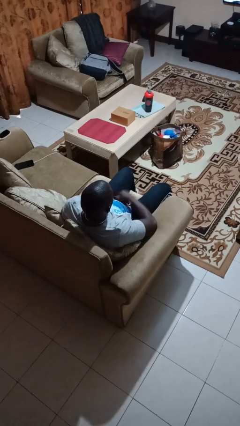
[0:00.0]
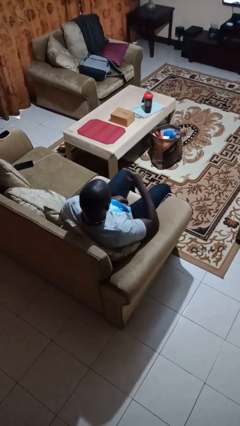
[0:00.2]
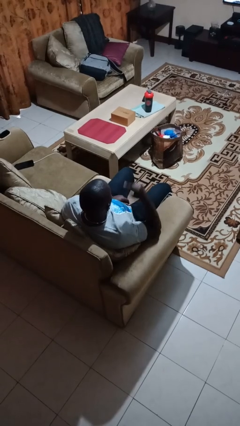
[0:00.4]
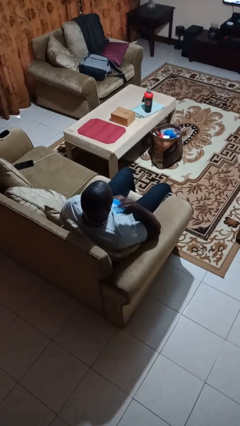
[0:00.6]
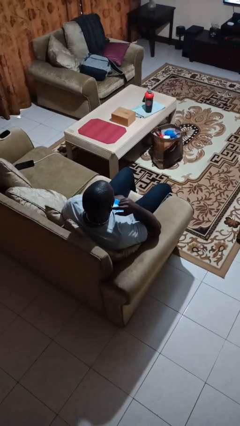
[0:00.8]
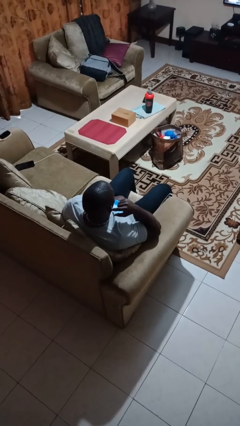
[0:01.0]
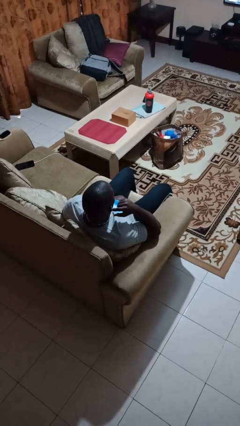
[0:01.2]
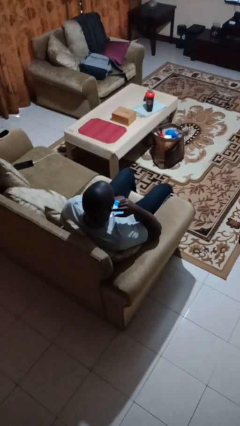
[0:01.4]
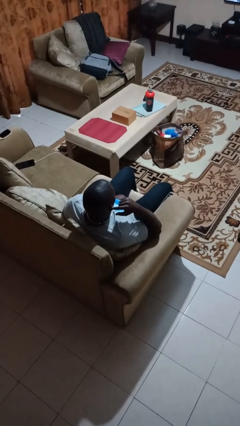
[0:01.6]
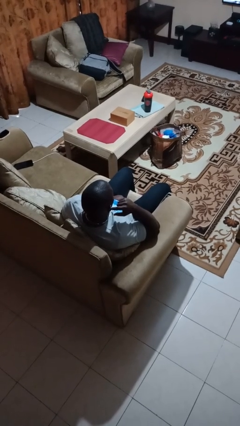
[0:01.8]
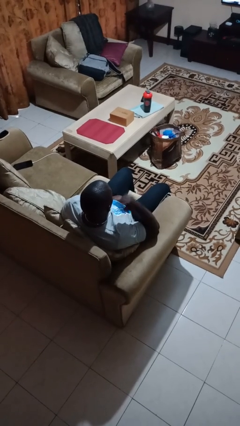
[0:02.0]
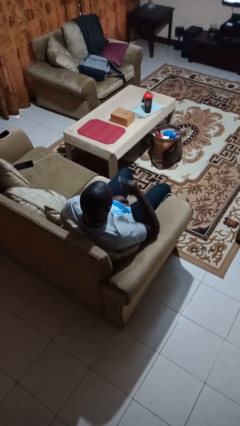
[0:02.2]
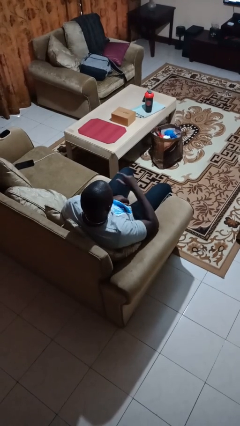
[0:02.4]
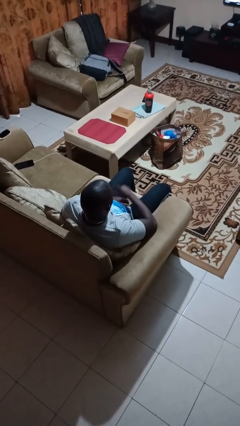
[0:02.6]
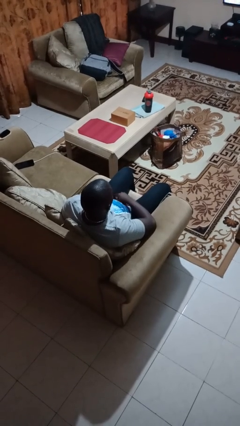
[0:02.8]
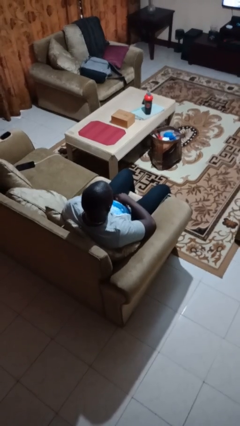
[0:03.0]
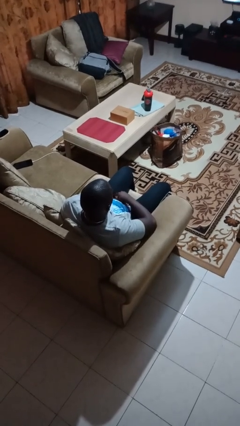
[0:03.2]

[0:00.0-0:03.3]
person gestures listen closely

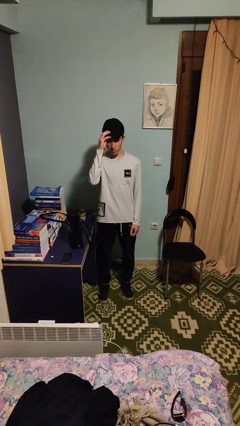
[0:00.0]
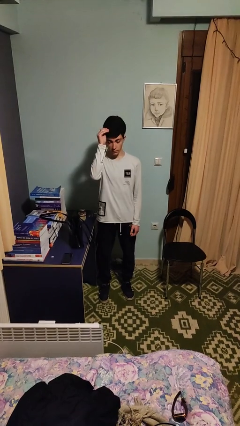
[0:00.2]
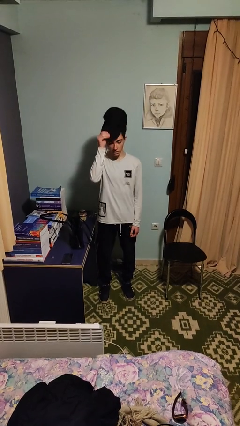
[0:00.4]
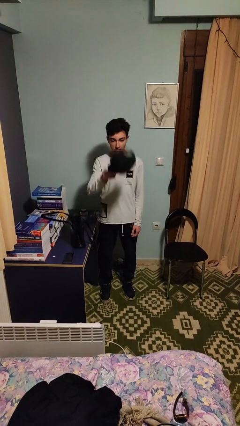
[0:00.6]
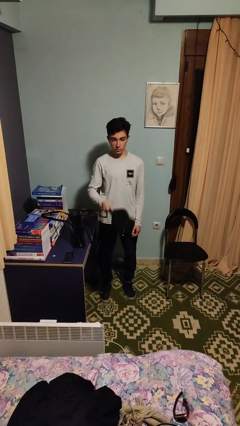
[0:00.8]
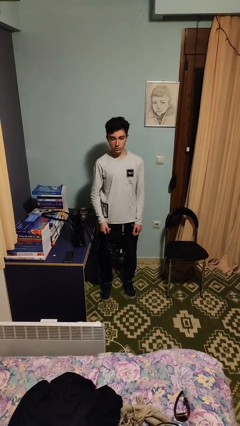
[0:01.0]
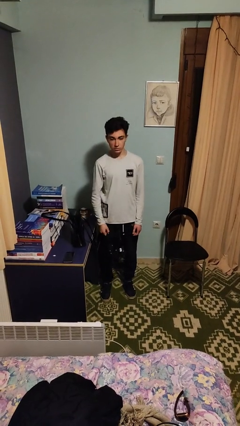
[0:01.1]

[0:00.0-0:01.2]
person takes off hat

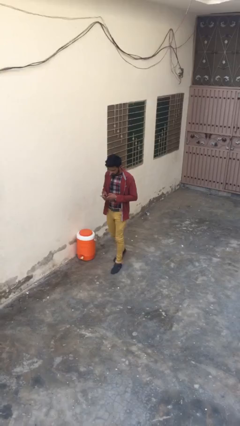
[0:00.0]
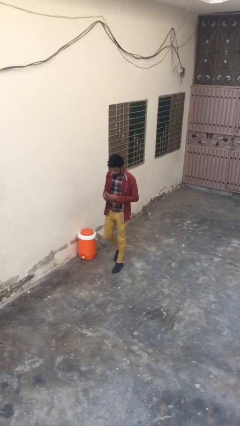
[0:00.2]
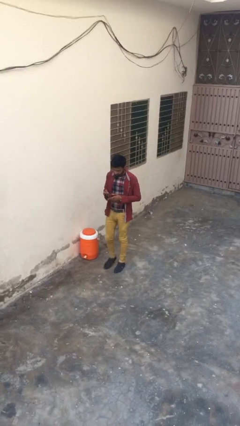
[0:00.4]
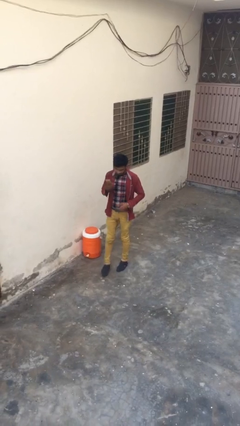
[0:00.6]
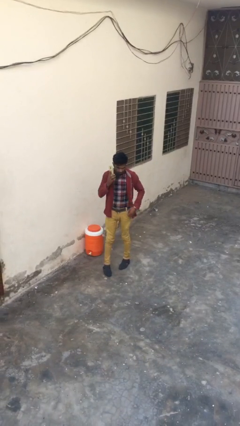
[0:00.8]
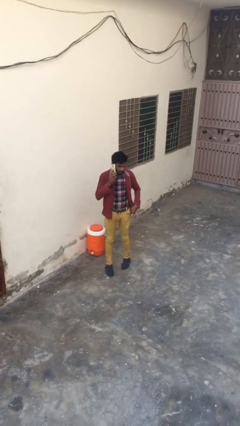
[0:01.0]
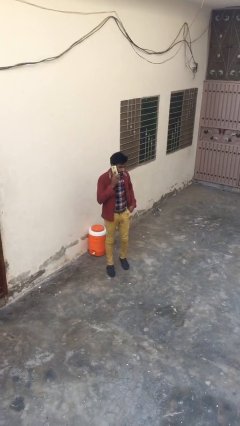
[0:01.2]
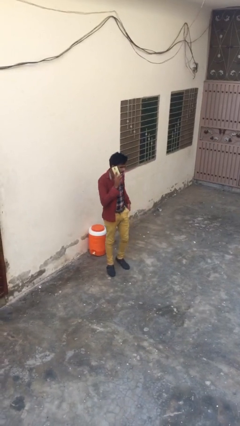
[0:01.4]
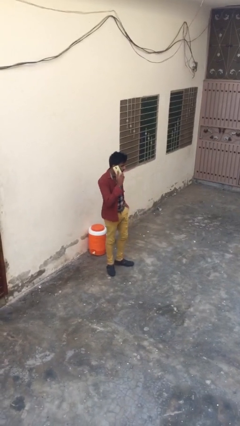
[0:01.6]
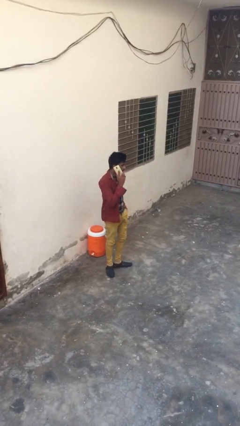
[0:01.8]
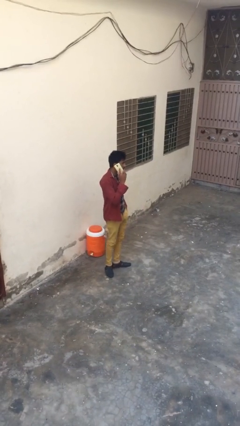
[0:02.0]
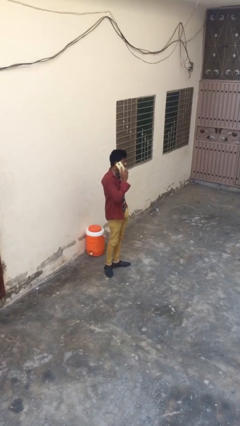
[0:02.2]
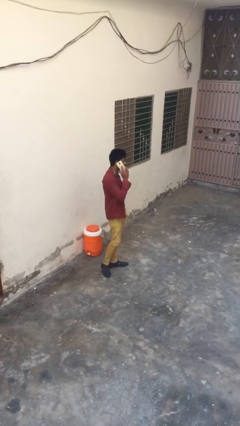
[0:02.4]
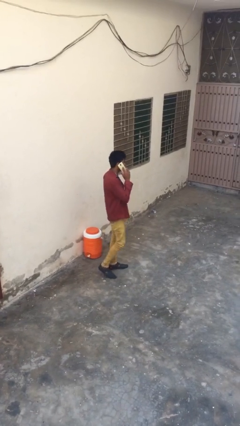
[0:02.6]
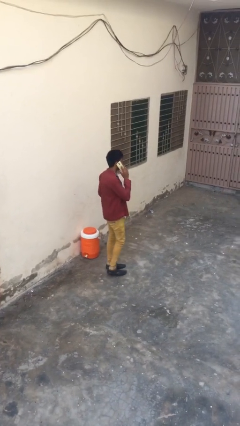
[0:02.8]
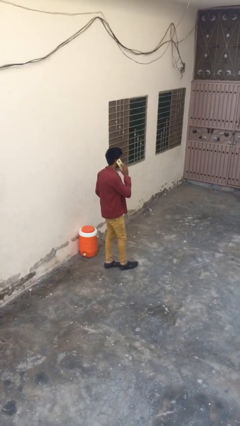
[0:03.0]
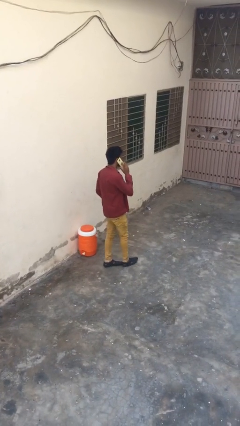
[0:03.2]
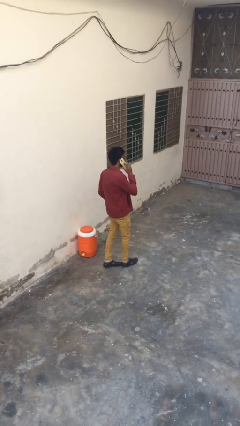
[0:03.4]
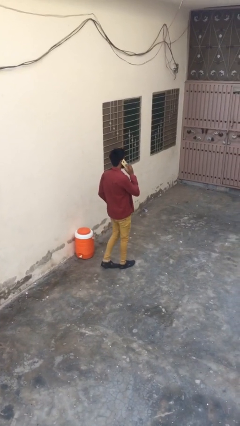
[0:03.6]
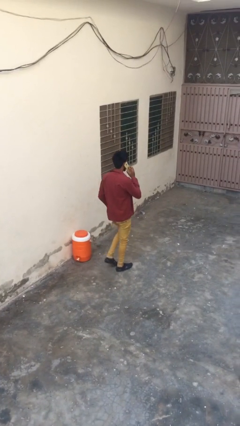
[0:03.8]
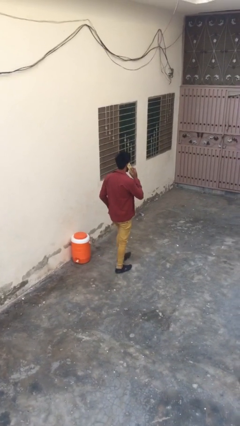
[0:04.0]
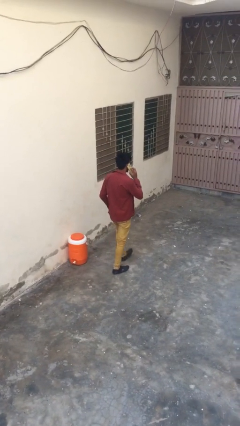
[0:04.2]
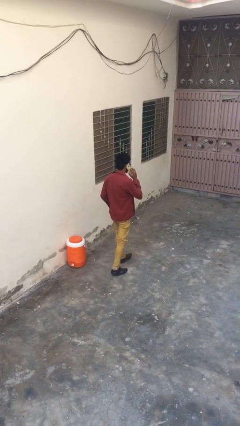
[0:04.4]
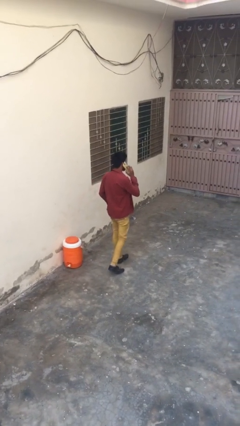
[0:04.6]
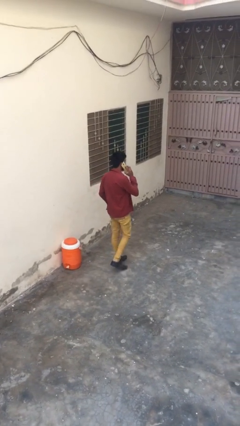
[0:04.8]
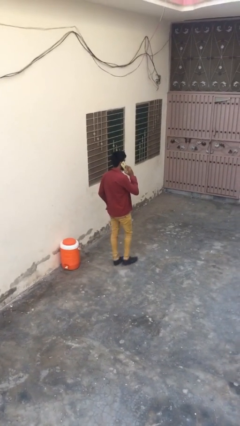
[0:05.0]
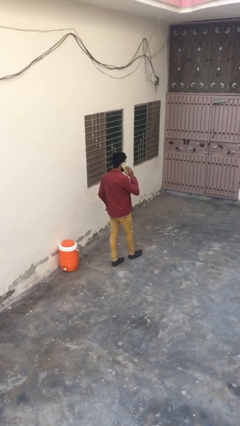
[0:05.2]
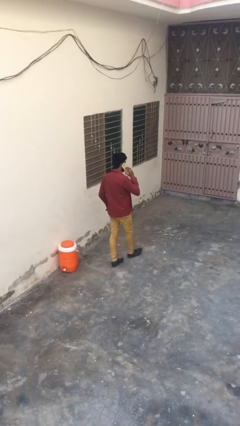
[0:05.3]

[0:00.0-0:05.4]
person talks on phone

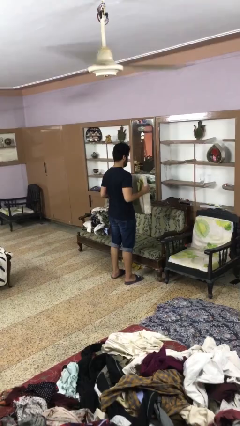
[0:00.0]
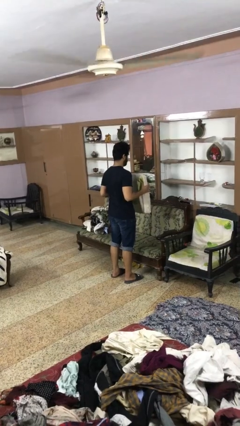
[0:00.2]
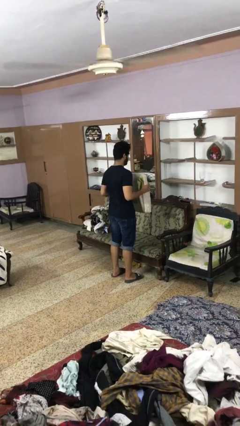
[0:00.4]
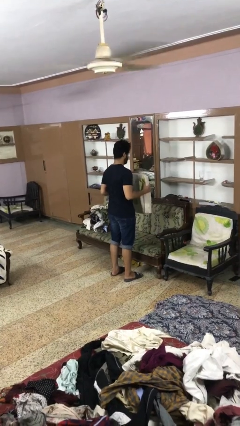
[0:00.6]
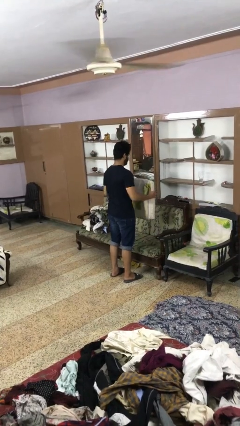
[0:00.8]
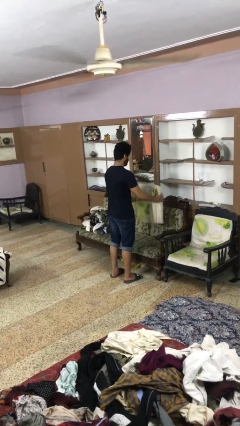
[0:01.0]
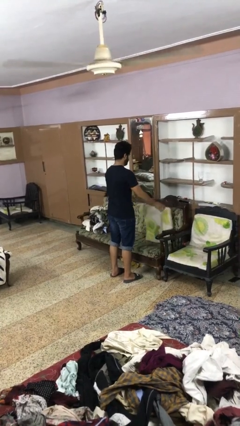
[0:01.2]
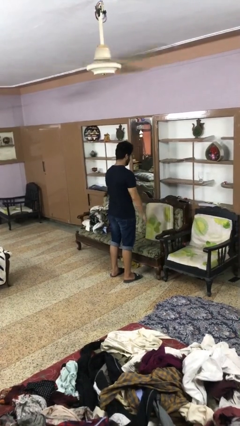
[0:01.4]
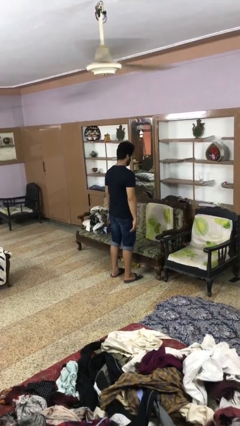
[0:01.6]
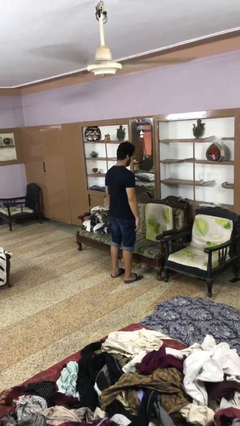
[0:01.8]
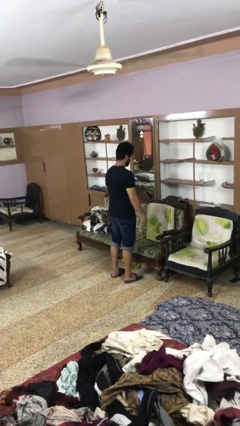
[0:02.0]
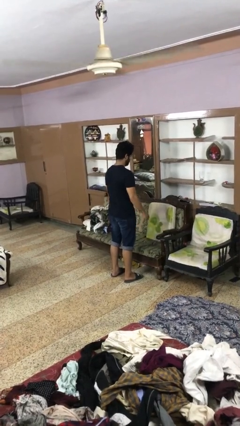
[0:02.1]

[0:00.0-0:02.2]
person puts down object on couch

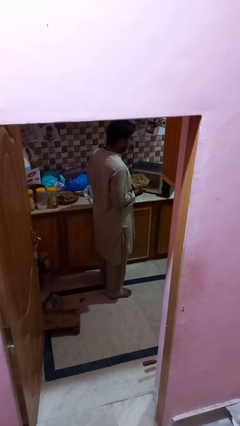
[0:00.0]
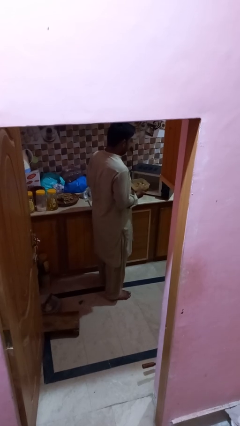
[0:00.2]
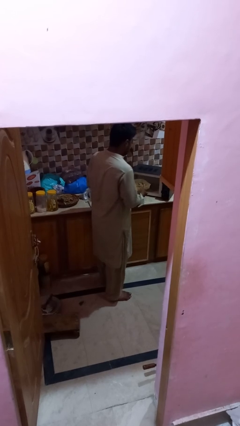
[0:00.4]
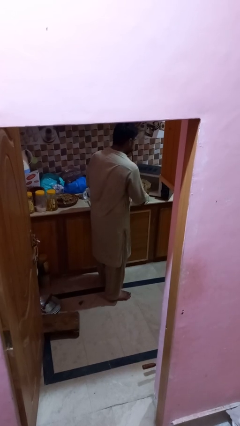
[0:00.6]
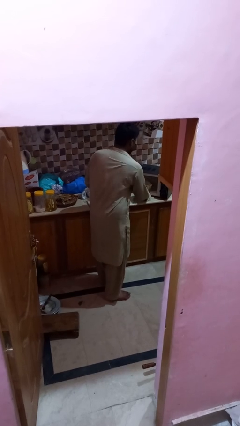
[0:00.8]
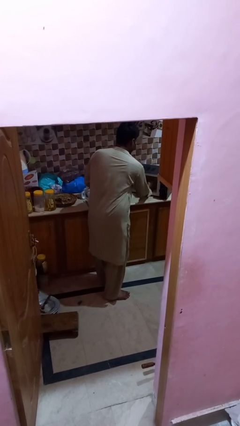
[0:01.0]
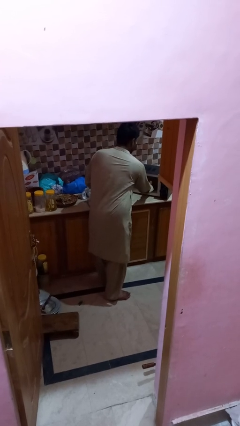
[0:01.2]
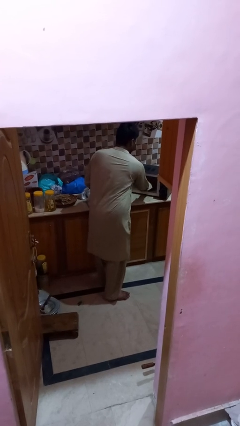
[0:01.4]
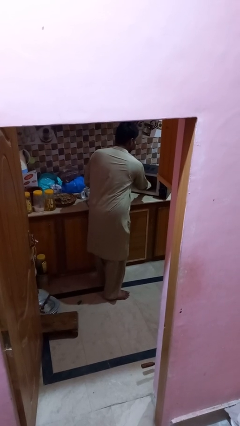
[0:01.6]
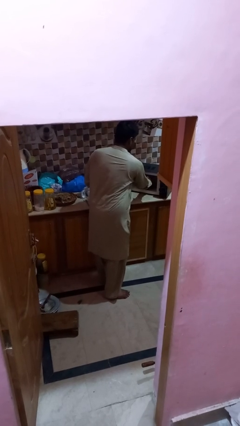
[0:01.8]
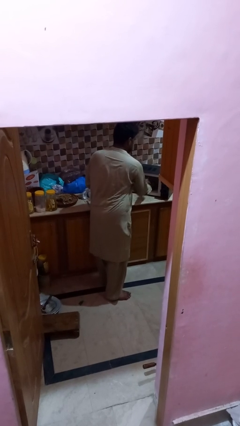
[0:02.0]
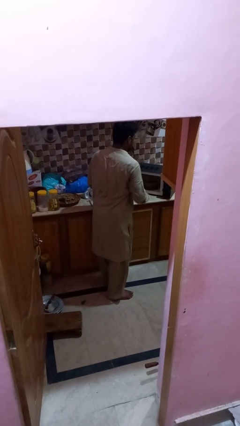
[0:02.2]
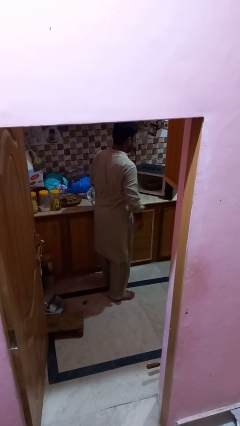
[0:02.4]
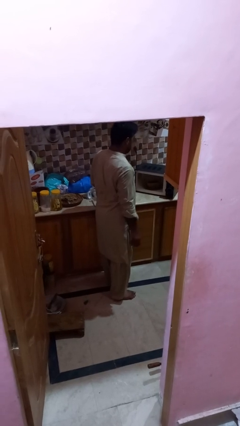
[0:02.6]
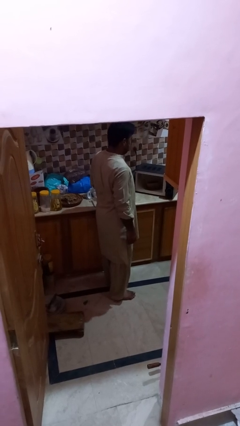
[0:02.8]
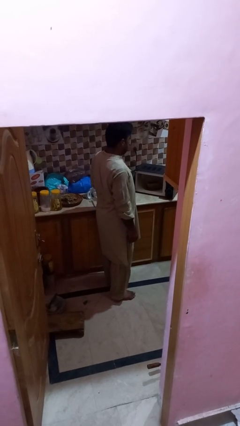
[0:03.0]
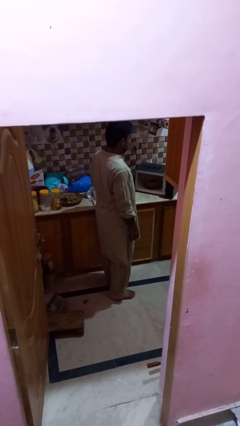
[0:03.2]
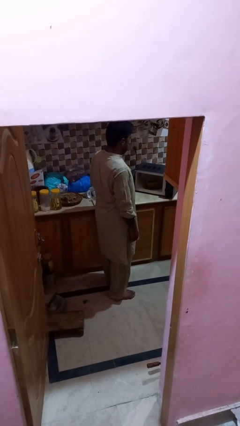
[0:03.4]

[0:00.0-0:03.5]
person puts object into microwave

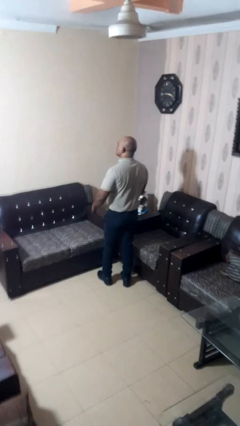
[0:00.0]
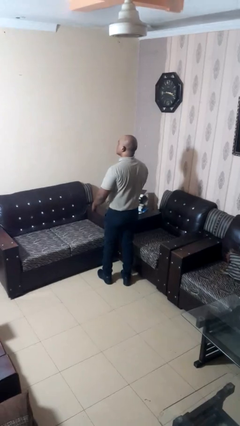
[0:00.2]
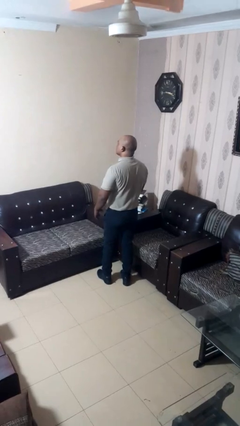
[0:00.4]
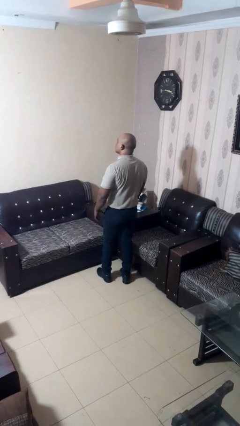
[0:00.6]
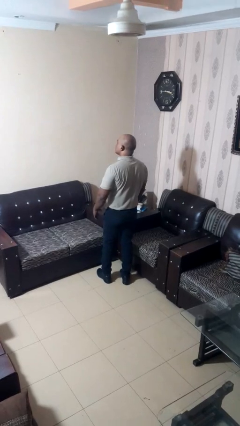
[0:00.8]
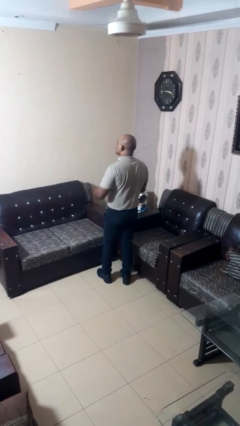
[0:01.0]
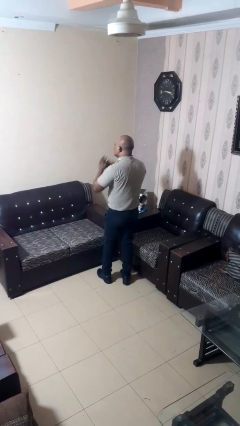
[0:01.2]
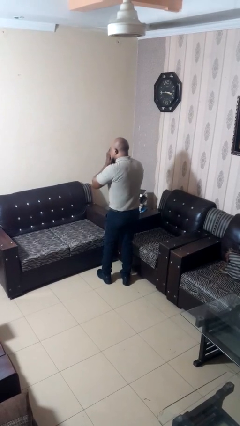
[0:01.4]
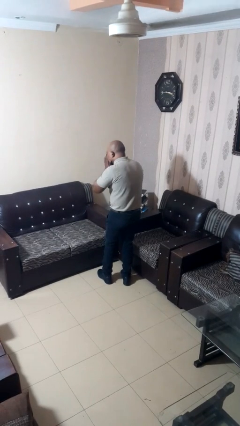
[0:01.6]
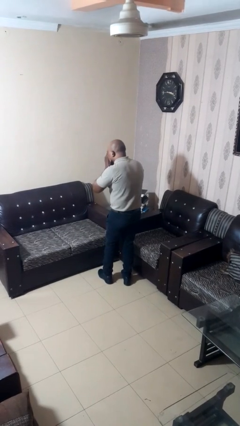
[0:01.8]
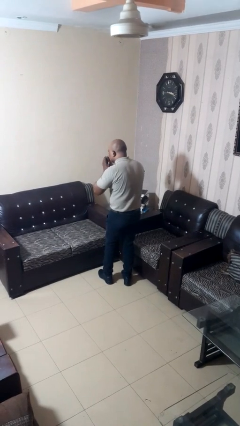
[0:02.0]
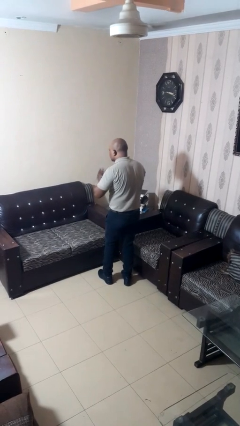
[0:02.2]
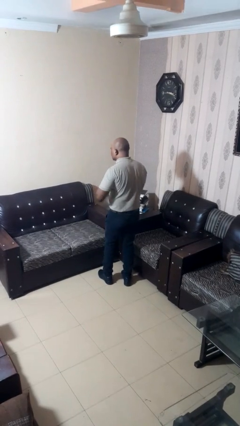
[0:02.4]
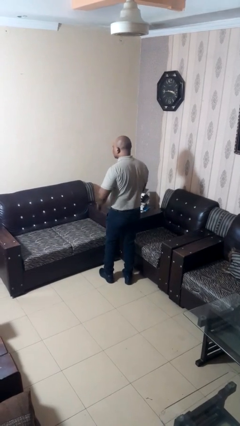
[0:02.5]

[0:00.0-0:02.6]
person sneezes into hand
